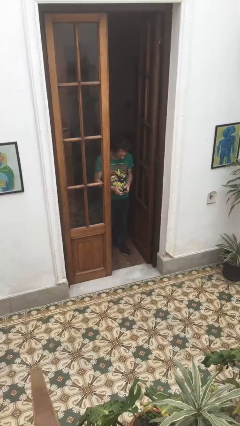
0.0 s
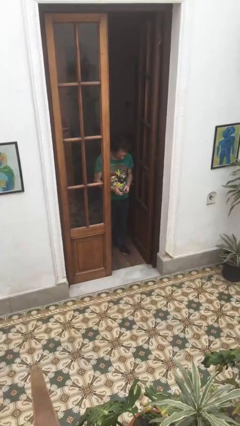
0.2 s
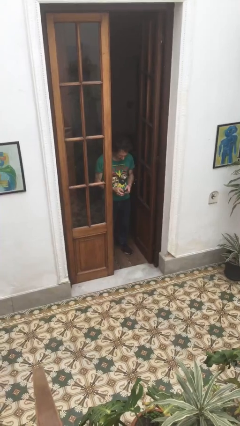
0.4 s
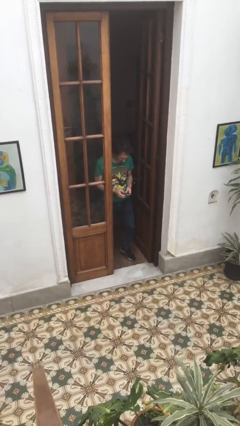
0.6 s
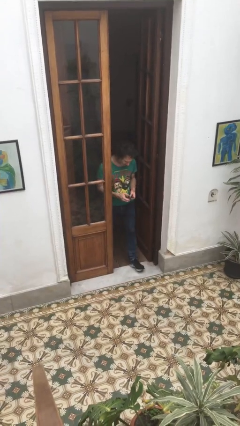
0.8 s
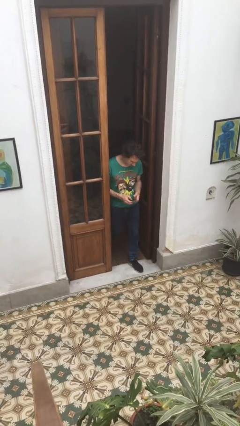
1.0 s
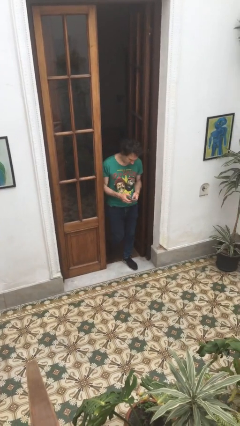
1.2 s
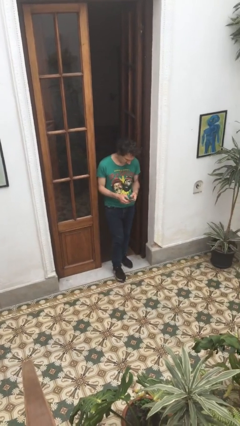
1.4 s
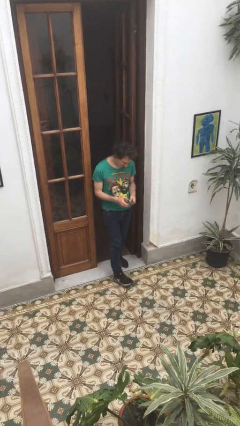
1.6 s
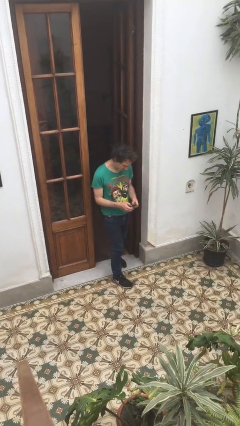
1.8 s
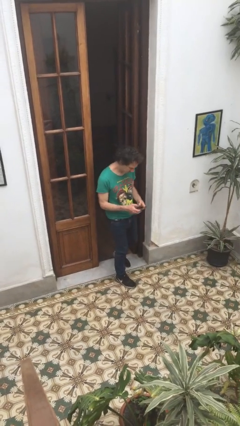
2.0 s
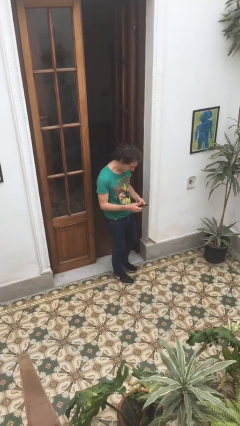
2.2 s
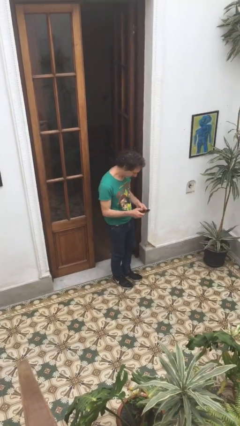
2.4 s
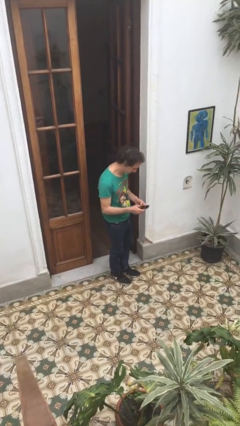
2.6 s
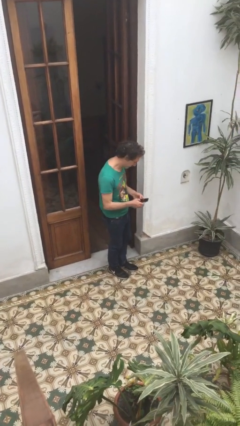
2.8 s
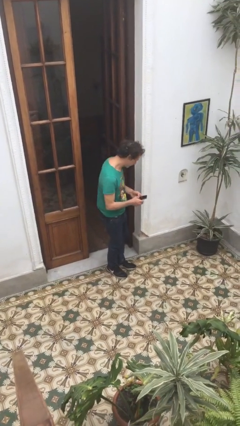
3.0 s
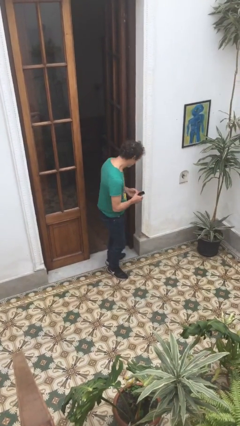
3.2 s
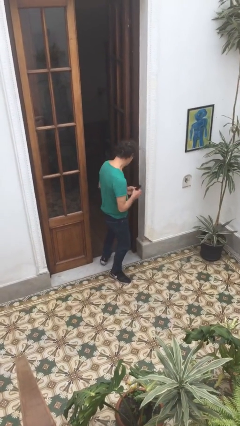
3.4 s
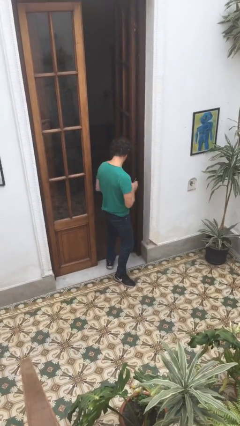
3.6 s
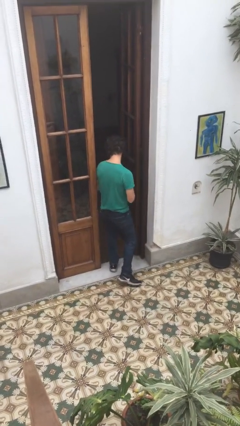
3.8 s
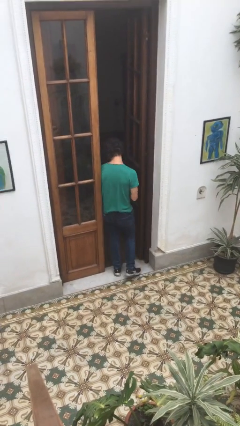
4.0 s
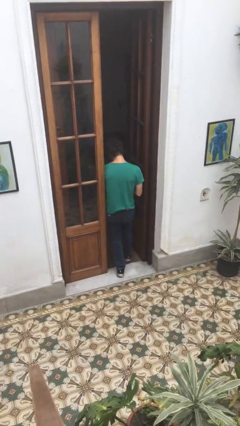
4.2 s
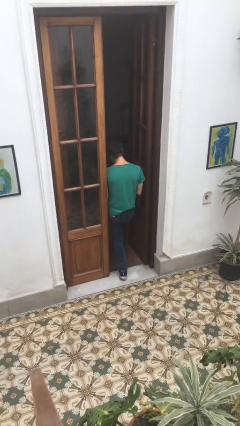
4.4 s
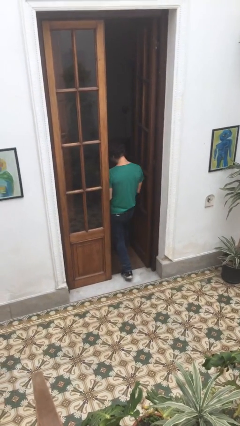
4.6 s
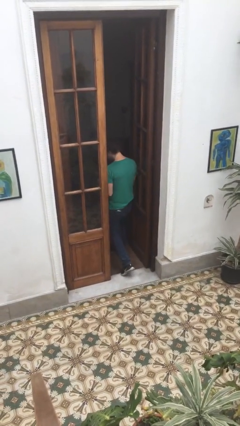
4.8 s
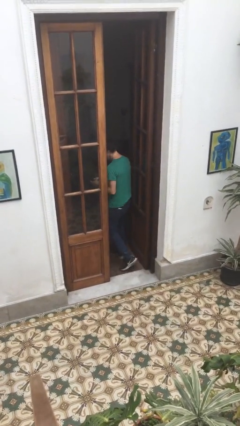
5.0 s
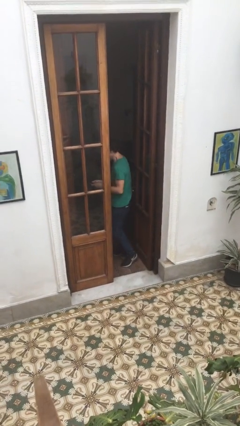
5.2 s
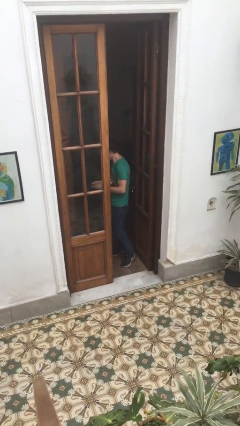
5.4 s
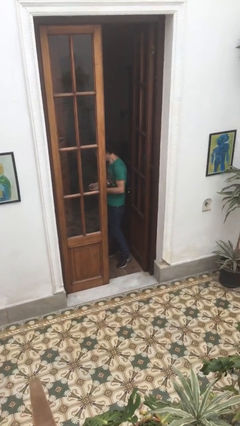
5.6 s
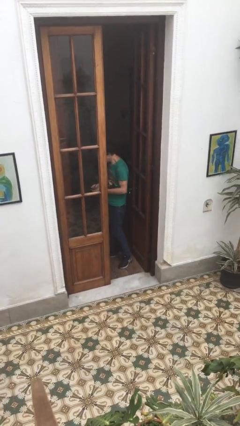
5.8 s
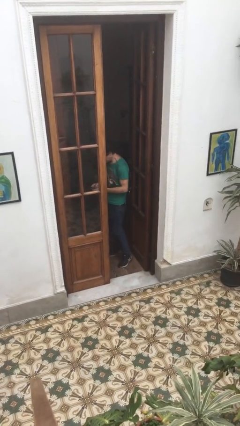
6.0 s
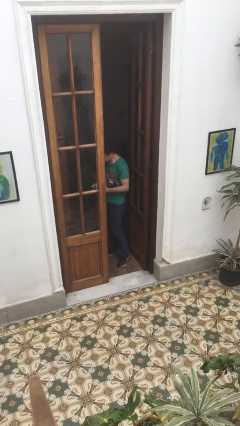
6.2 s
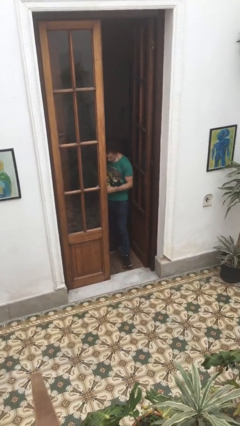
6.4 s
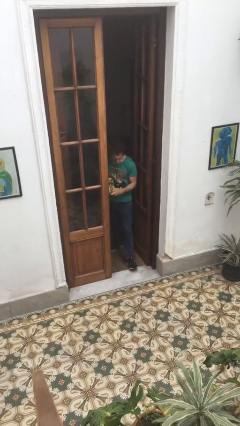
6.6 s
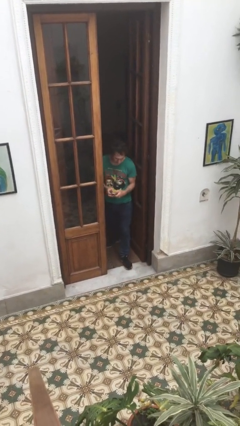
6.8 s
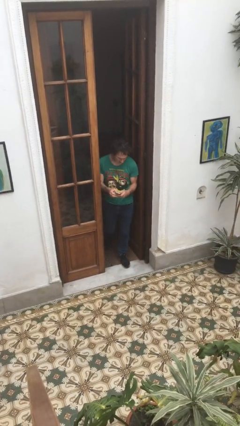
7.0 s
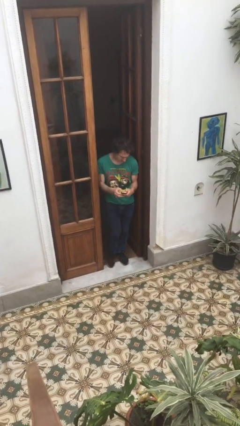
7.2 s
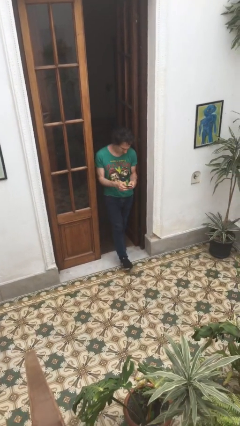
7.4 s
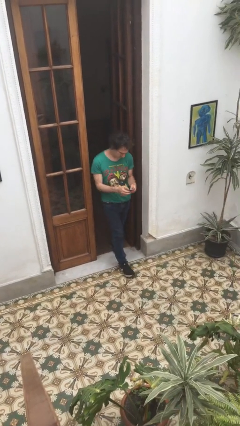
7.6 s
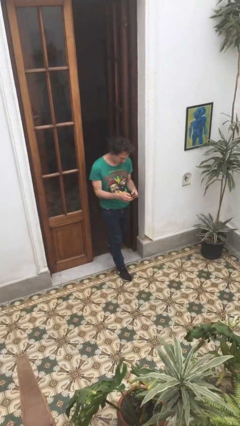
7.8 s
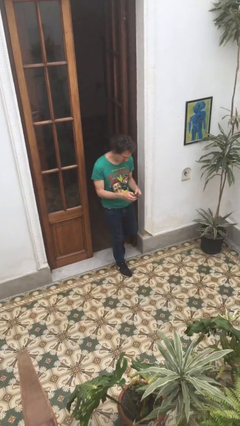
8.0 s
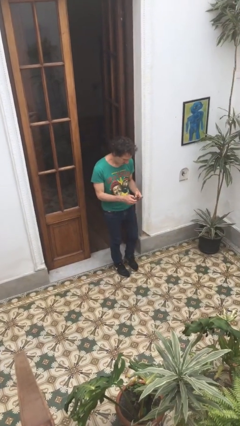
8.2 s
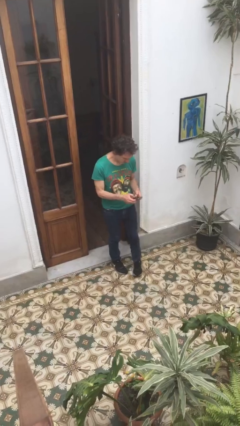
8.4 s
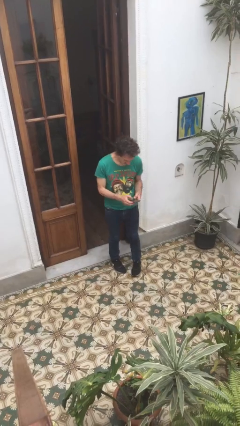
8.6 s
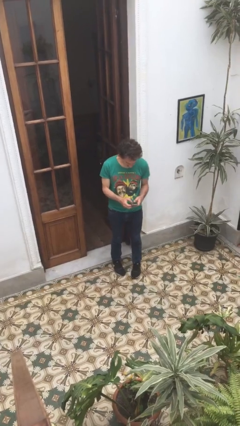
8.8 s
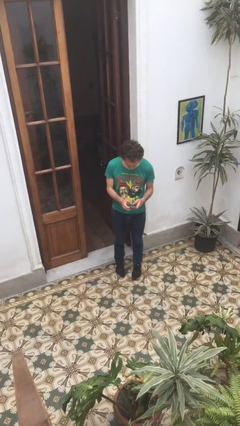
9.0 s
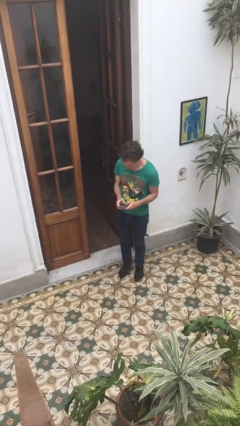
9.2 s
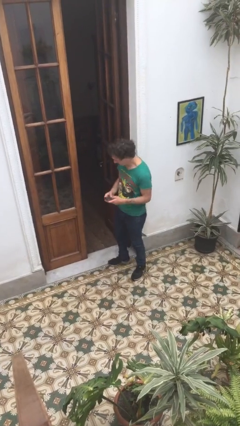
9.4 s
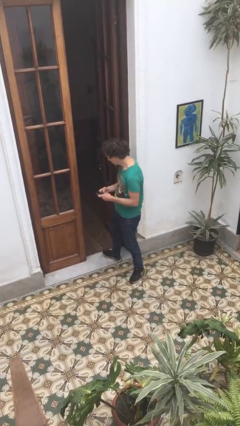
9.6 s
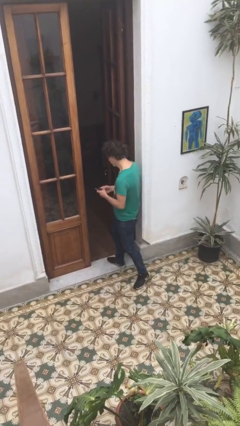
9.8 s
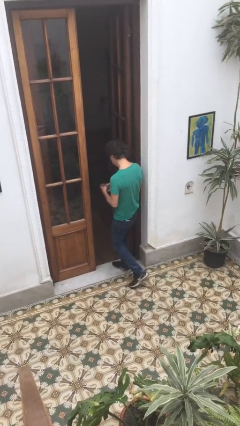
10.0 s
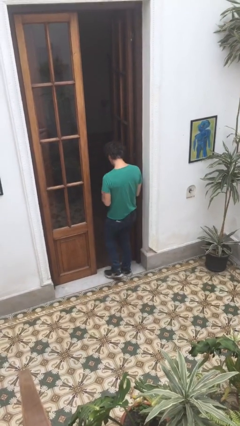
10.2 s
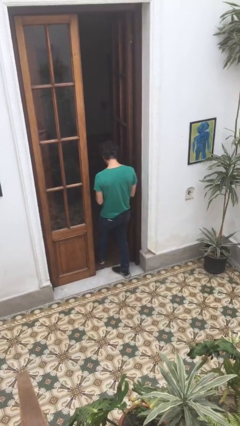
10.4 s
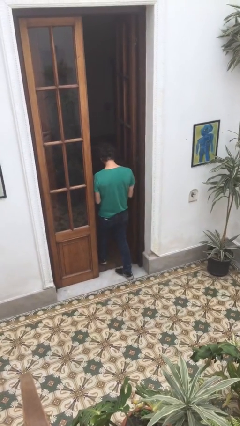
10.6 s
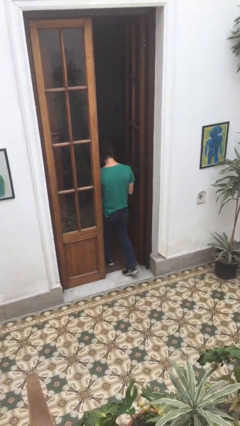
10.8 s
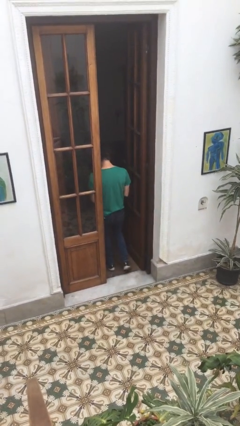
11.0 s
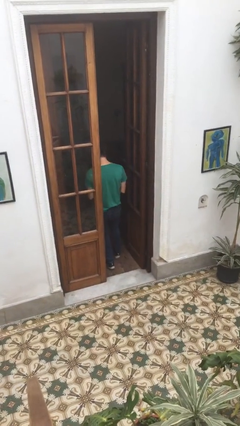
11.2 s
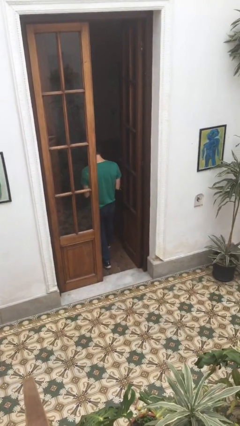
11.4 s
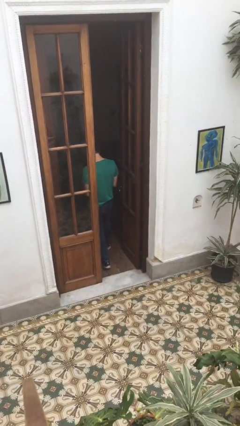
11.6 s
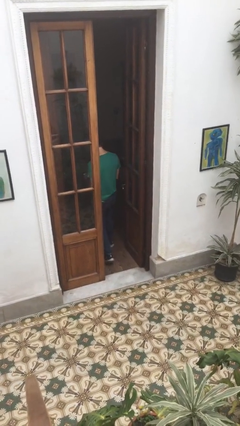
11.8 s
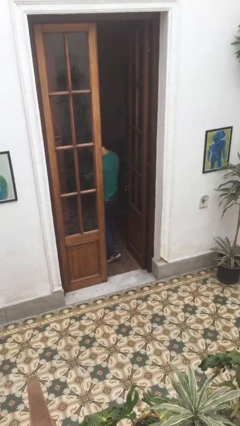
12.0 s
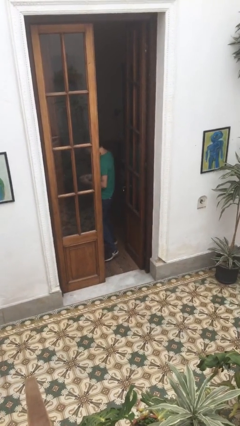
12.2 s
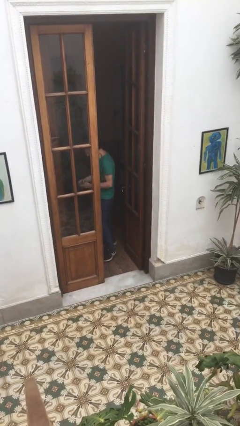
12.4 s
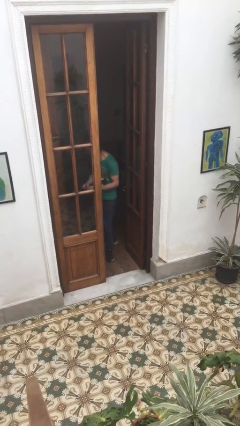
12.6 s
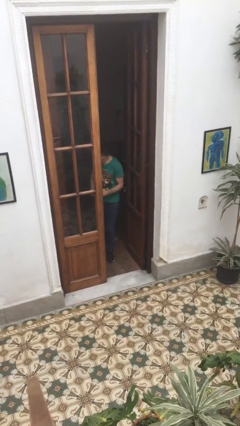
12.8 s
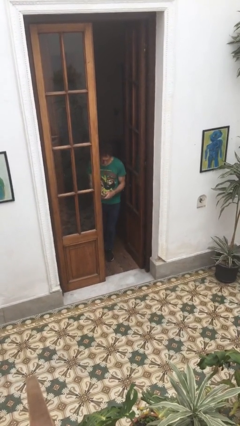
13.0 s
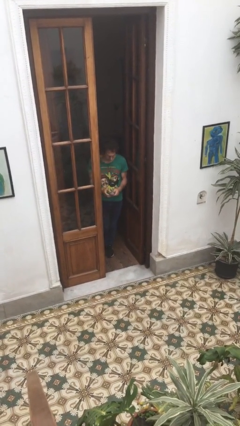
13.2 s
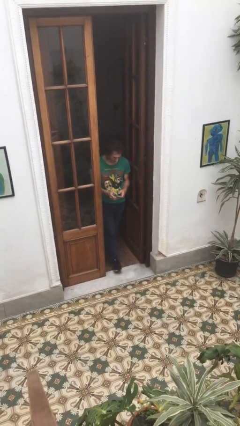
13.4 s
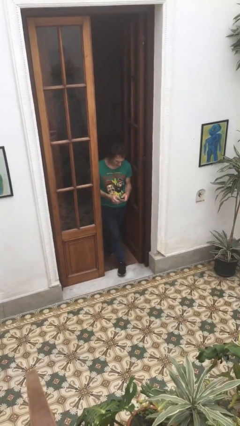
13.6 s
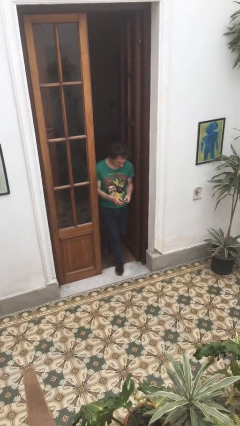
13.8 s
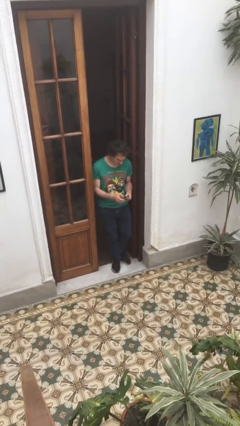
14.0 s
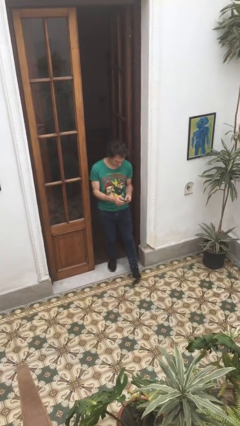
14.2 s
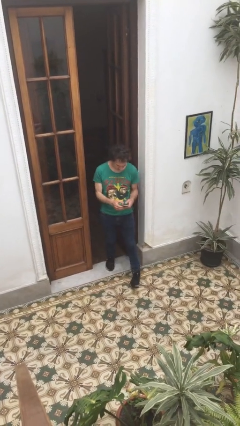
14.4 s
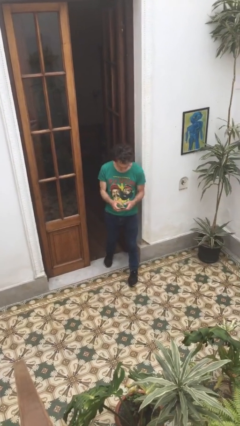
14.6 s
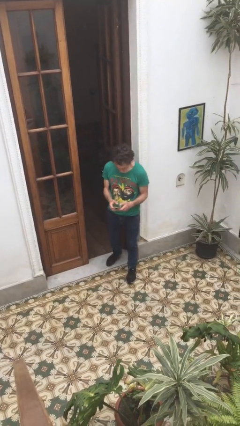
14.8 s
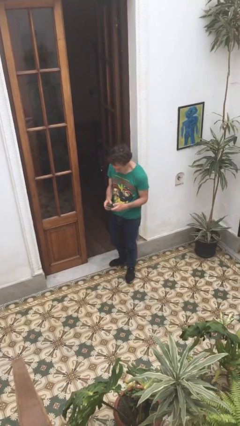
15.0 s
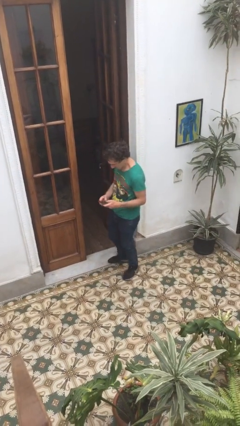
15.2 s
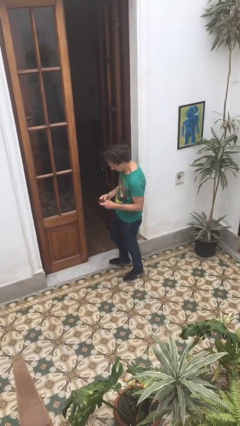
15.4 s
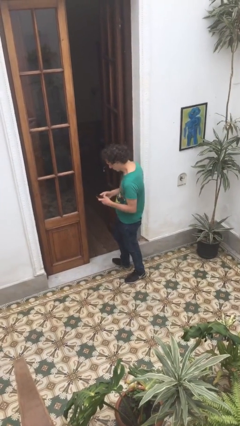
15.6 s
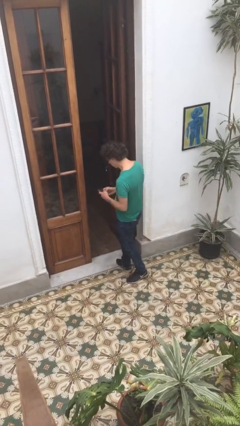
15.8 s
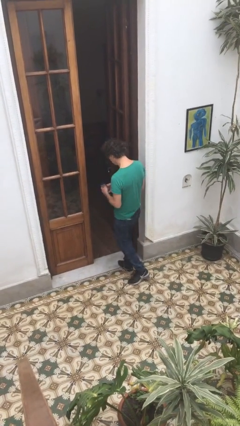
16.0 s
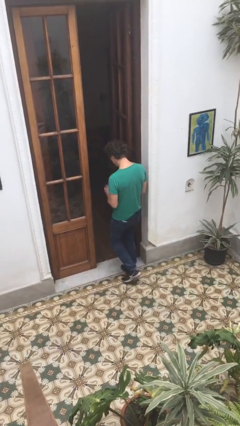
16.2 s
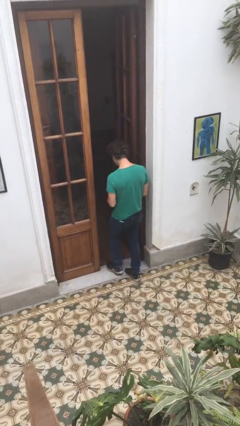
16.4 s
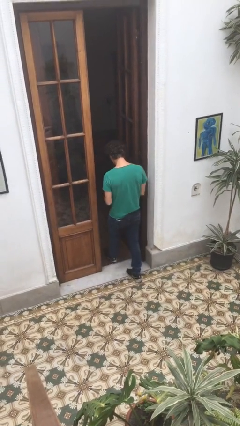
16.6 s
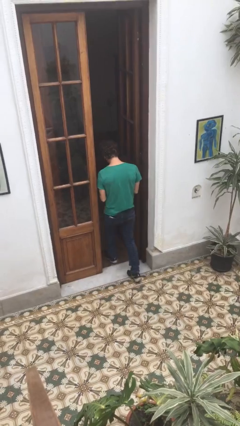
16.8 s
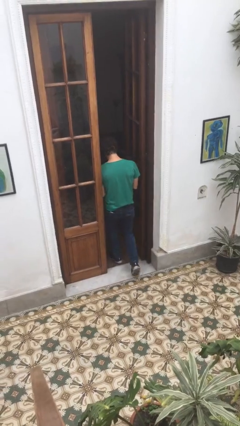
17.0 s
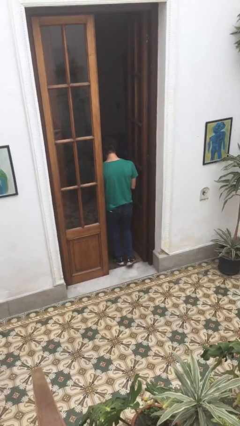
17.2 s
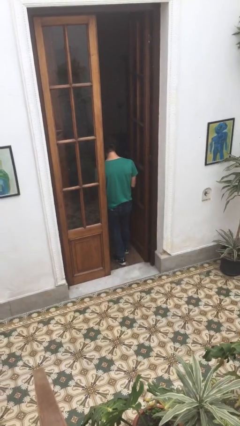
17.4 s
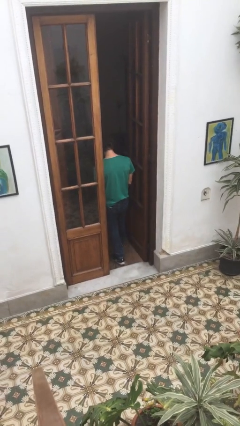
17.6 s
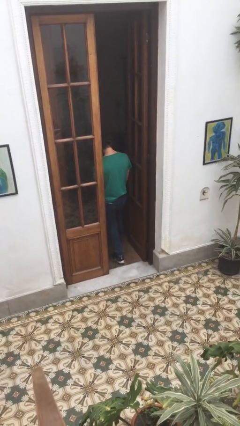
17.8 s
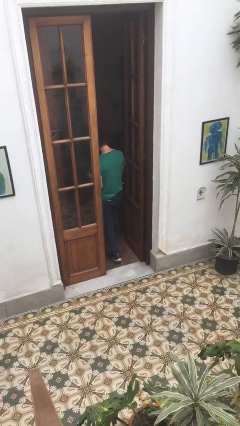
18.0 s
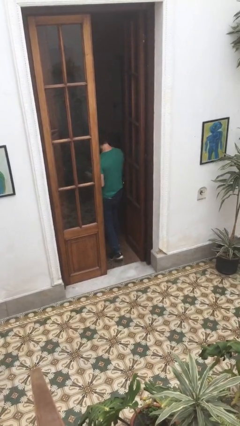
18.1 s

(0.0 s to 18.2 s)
person texts on phone
